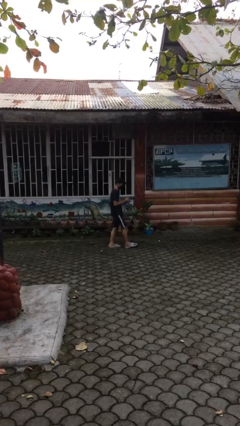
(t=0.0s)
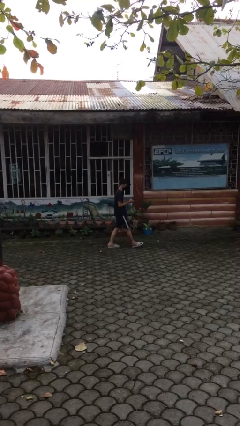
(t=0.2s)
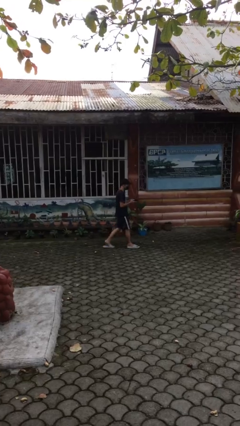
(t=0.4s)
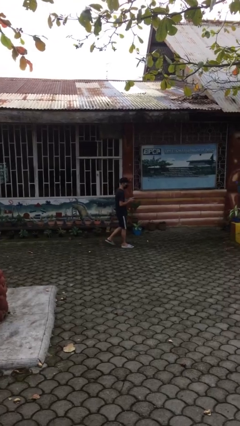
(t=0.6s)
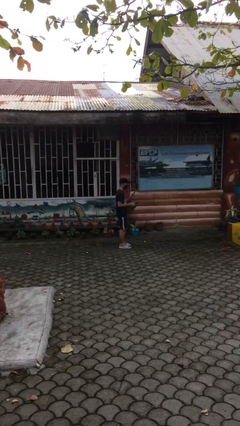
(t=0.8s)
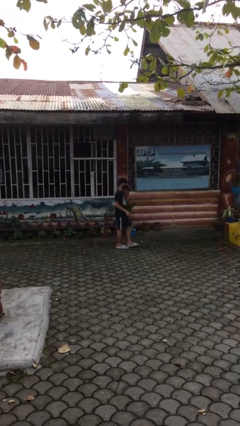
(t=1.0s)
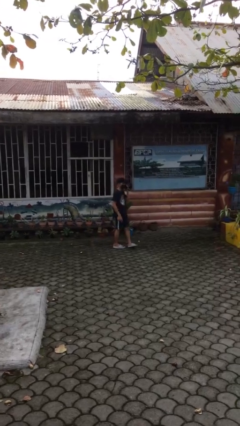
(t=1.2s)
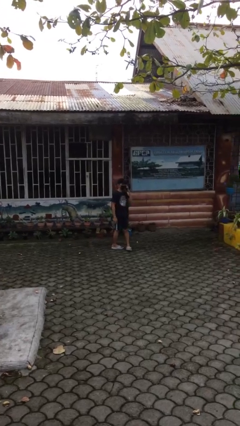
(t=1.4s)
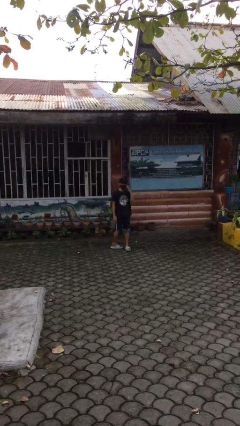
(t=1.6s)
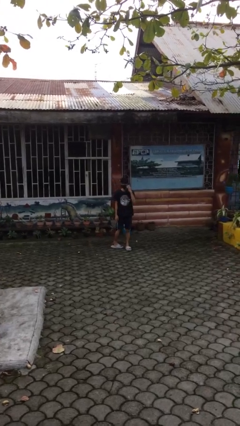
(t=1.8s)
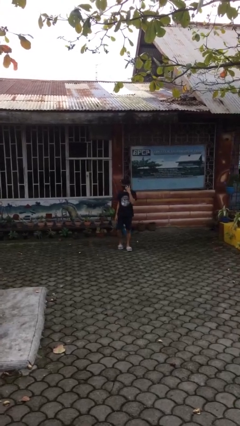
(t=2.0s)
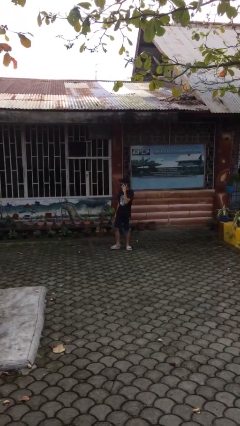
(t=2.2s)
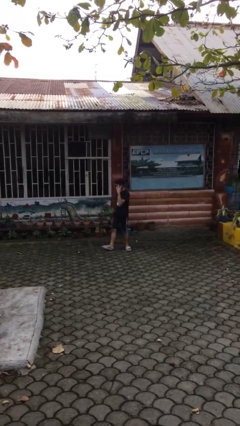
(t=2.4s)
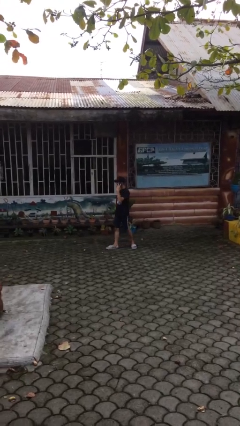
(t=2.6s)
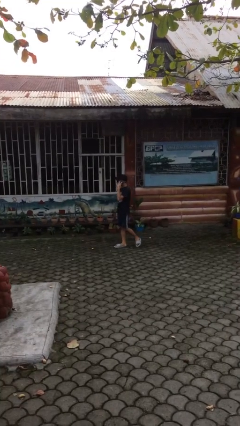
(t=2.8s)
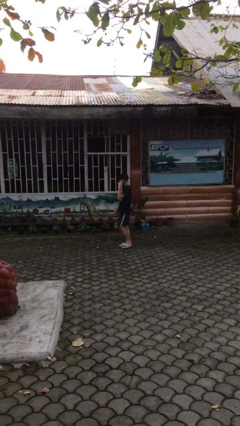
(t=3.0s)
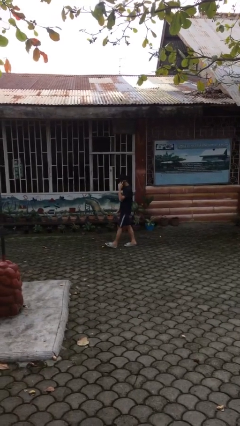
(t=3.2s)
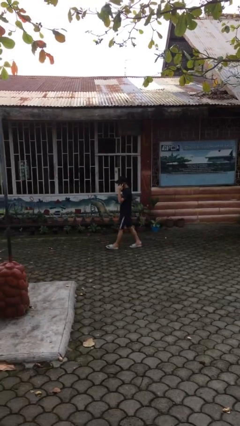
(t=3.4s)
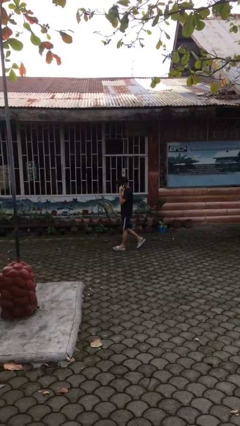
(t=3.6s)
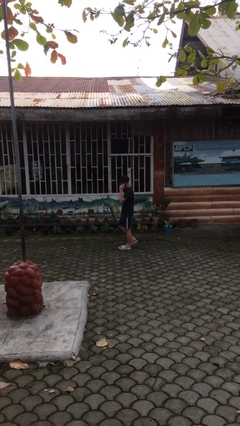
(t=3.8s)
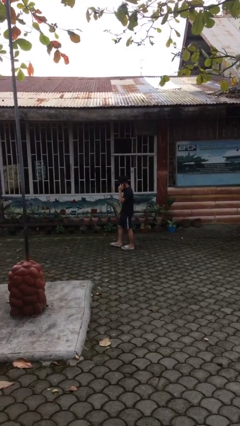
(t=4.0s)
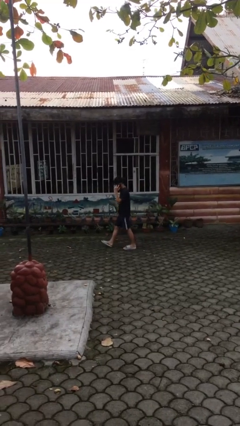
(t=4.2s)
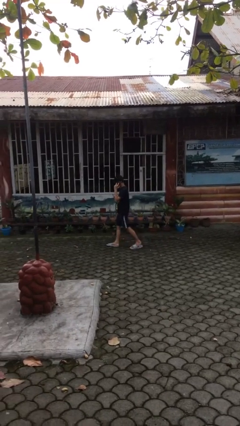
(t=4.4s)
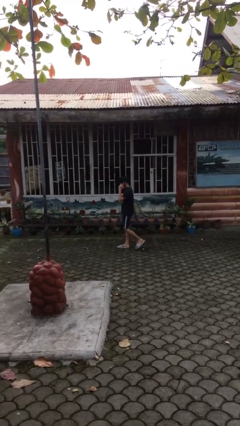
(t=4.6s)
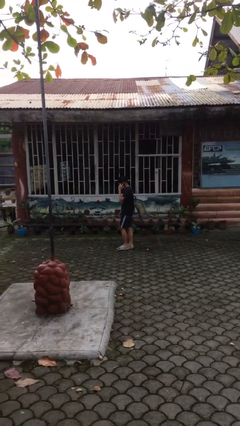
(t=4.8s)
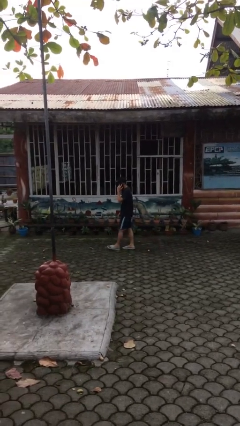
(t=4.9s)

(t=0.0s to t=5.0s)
person talks on phone

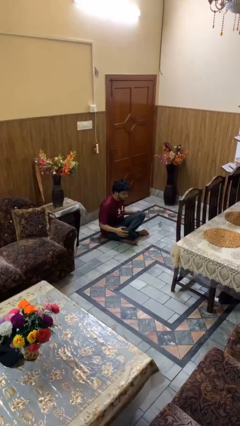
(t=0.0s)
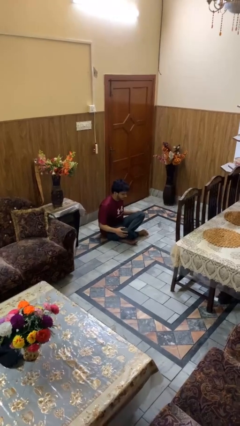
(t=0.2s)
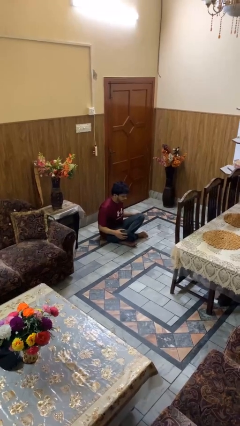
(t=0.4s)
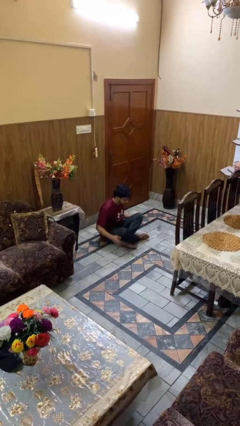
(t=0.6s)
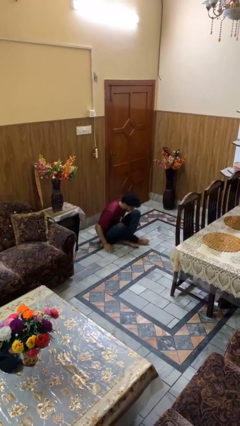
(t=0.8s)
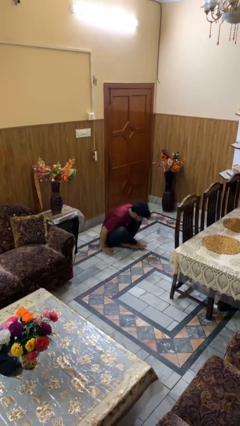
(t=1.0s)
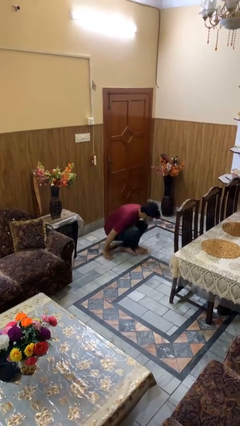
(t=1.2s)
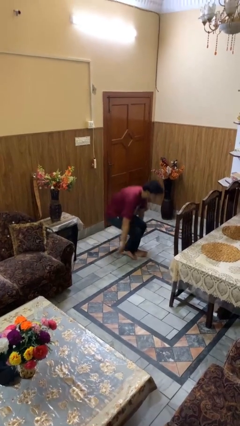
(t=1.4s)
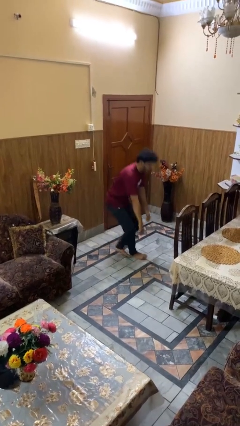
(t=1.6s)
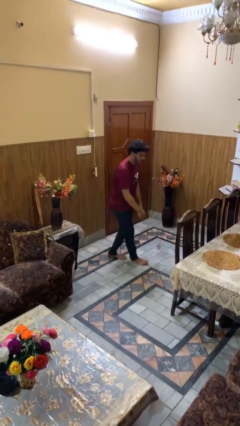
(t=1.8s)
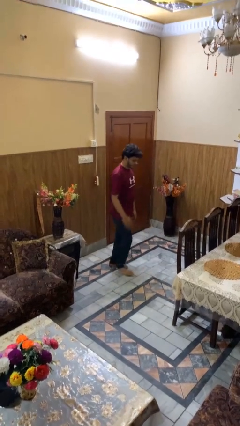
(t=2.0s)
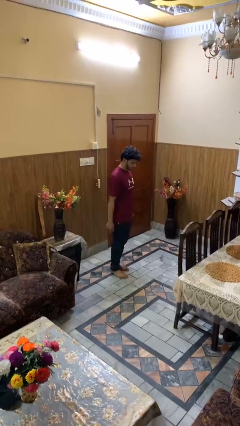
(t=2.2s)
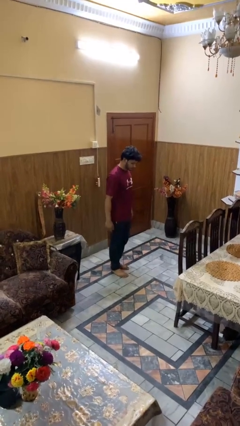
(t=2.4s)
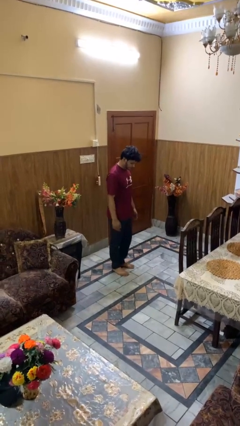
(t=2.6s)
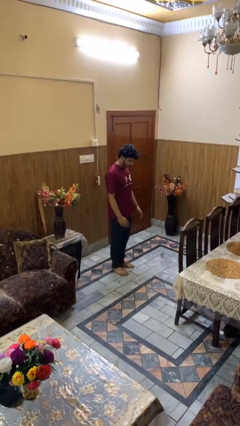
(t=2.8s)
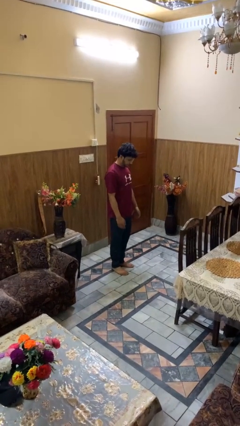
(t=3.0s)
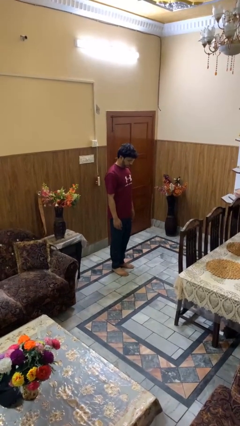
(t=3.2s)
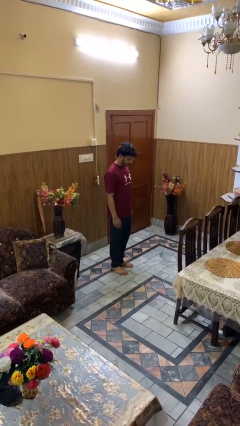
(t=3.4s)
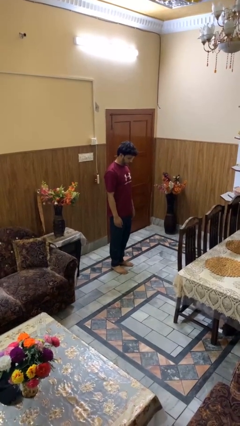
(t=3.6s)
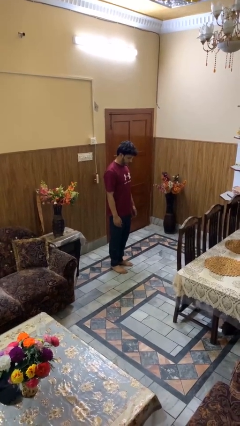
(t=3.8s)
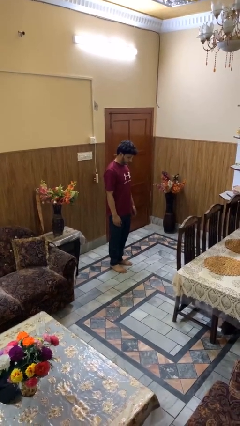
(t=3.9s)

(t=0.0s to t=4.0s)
person stands up from floor

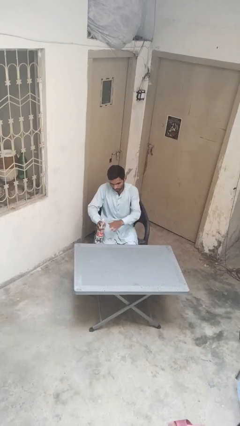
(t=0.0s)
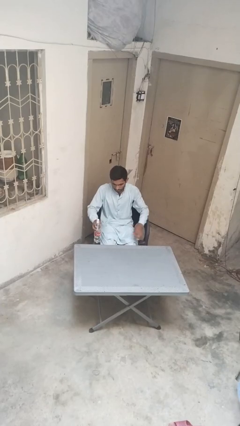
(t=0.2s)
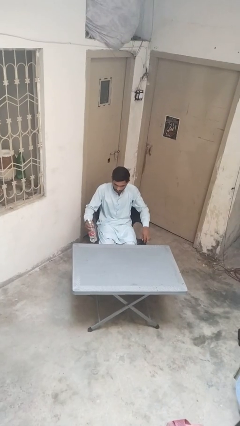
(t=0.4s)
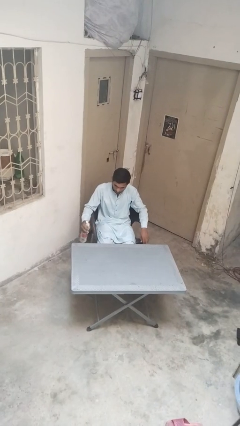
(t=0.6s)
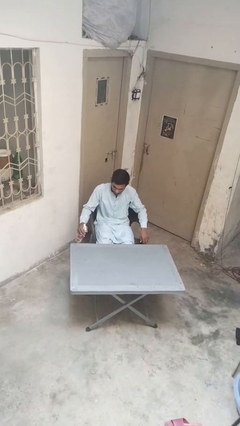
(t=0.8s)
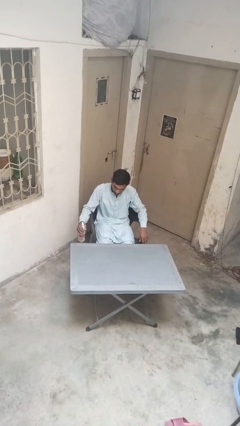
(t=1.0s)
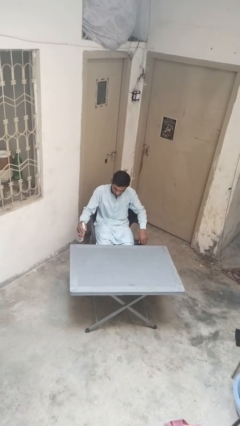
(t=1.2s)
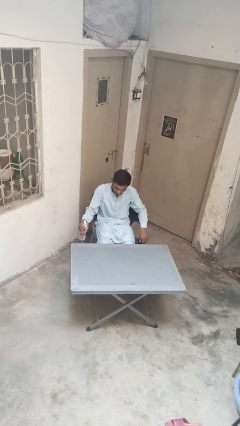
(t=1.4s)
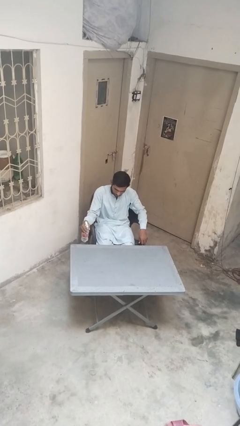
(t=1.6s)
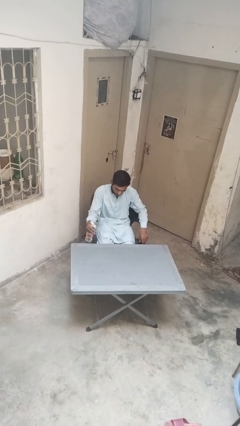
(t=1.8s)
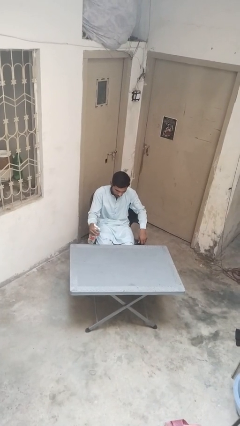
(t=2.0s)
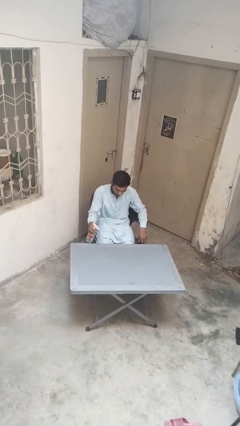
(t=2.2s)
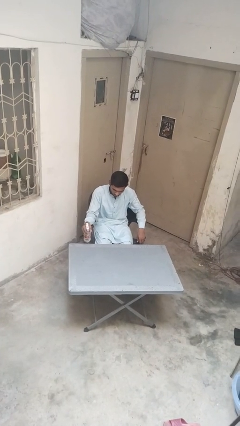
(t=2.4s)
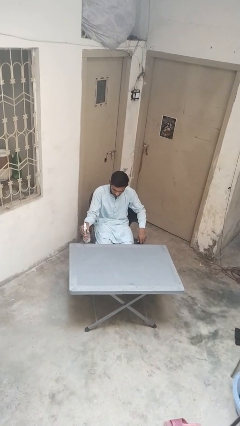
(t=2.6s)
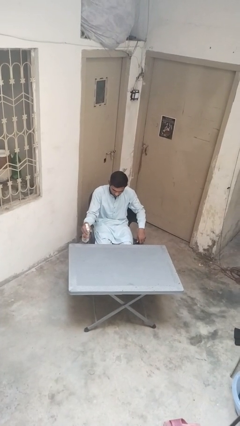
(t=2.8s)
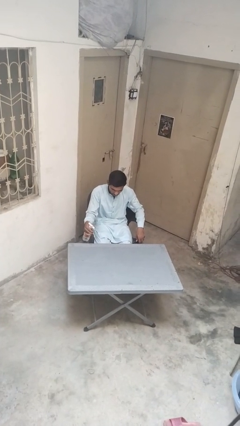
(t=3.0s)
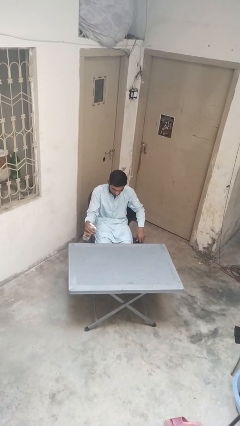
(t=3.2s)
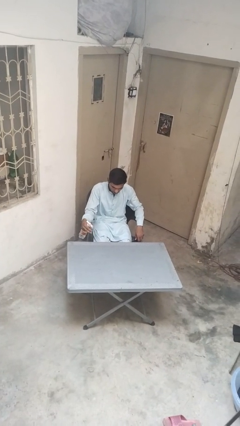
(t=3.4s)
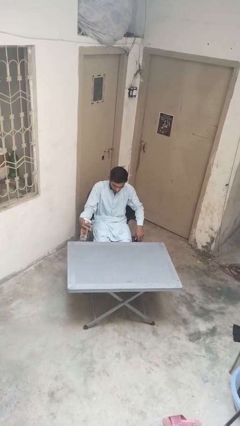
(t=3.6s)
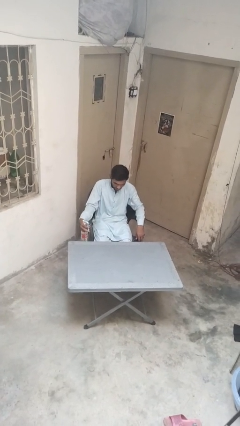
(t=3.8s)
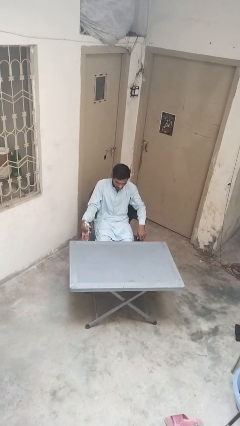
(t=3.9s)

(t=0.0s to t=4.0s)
person sprays from bottle

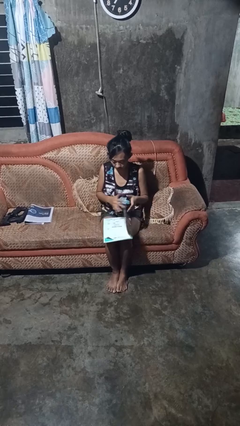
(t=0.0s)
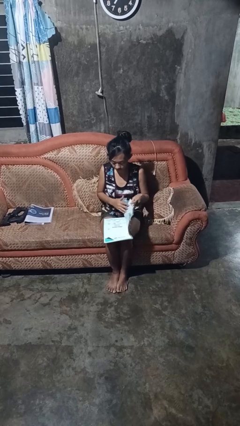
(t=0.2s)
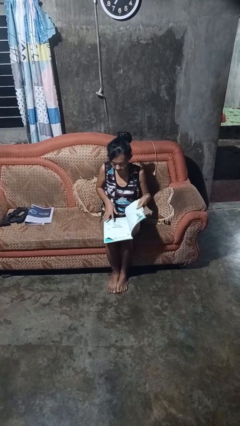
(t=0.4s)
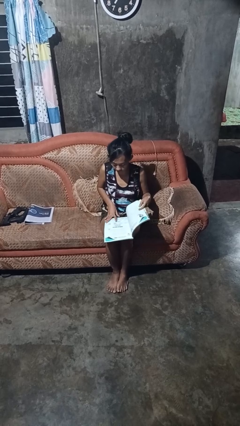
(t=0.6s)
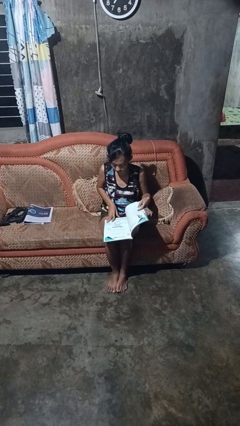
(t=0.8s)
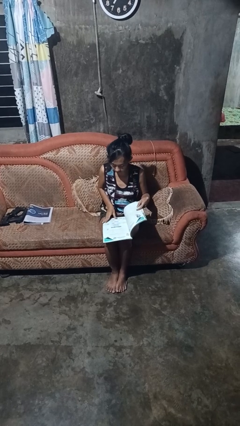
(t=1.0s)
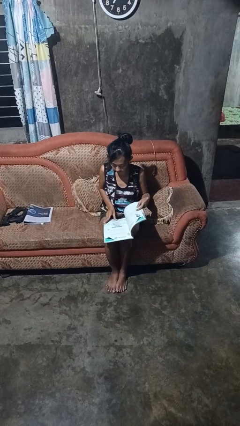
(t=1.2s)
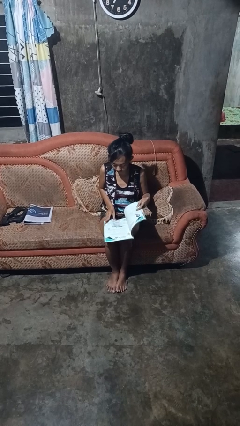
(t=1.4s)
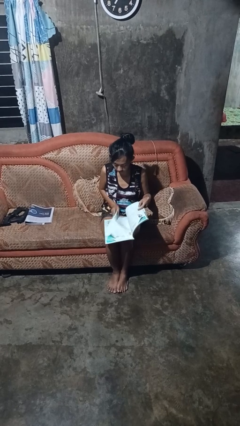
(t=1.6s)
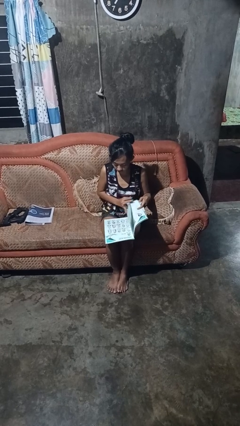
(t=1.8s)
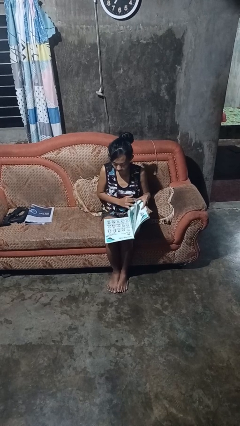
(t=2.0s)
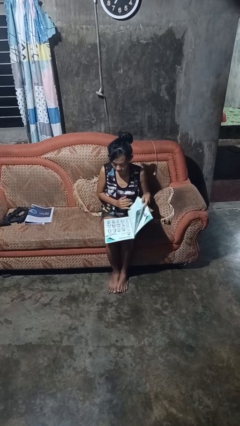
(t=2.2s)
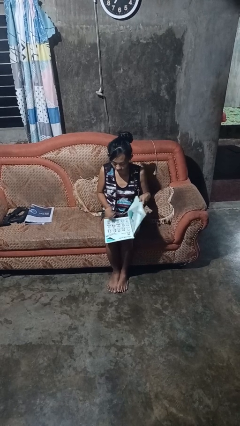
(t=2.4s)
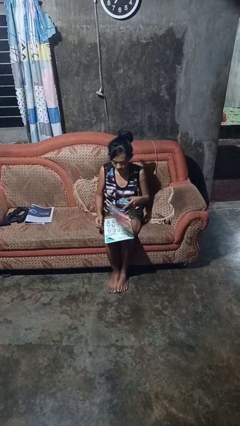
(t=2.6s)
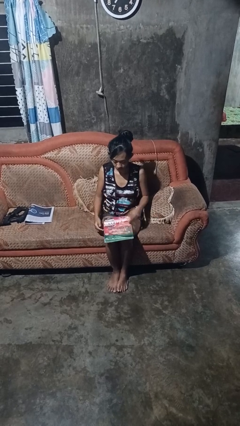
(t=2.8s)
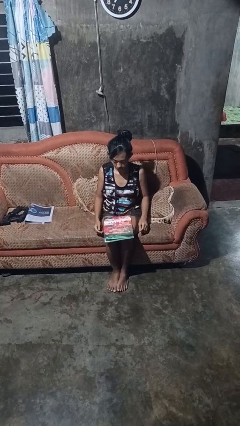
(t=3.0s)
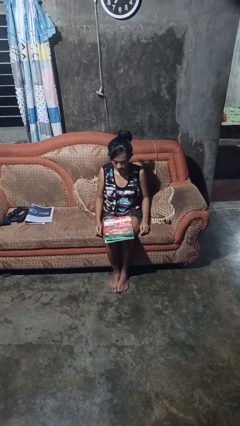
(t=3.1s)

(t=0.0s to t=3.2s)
person reads magazine

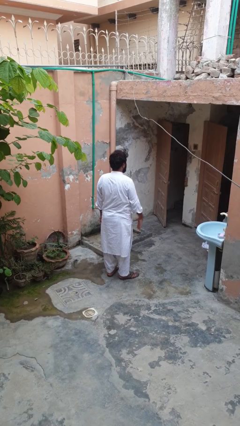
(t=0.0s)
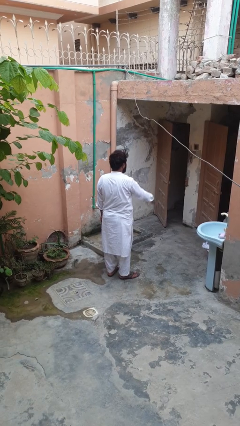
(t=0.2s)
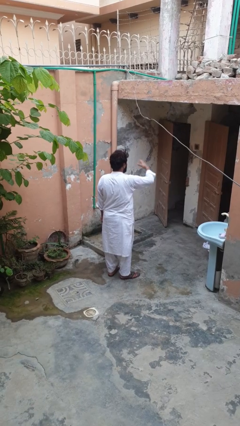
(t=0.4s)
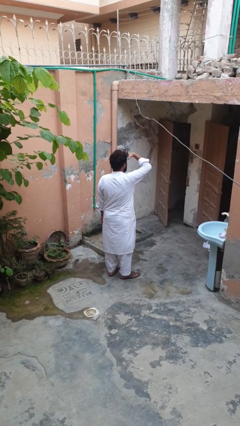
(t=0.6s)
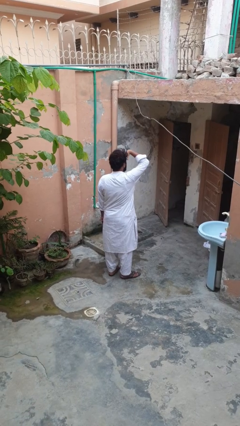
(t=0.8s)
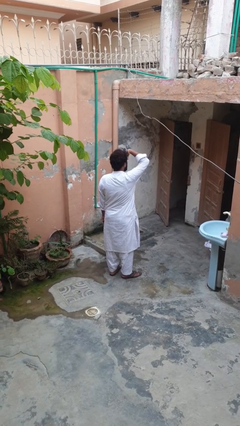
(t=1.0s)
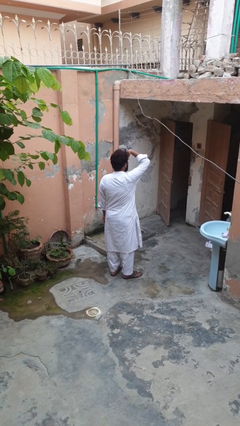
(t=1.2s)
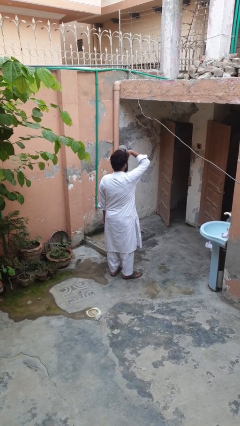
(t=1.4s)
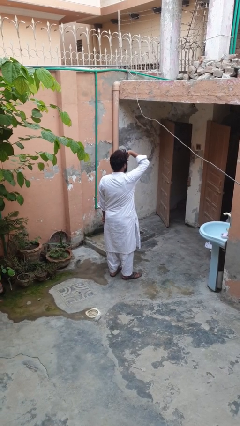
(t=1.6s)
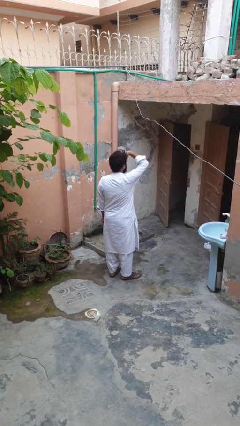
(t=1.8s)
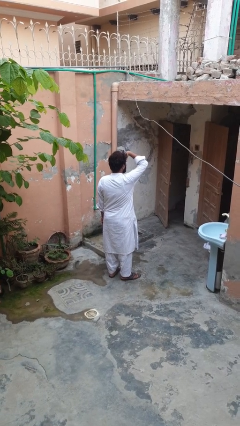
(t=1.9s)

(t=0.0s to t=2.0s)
person shades eyes
